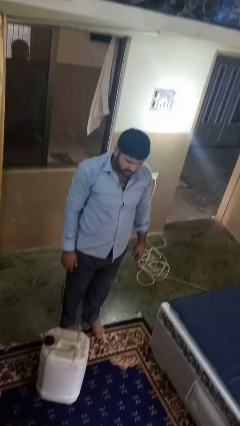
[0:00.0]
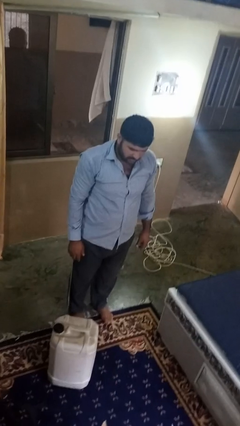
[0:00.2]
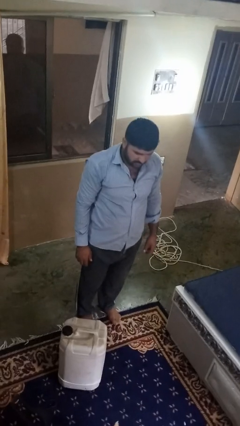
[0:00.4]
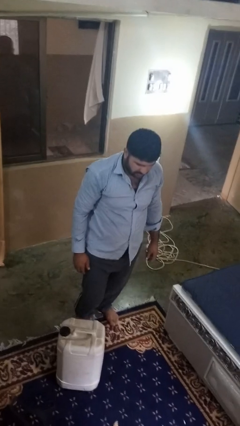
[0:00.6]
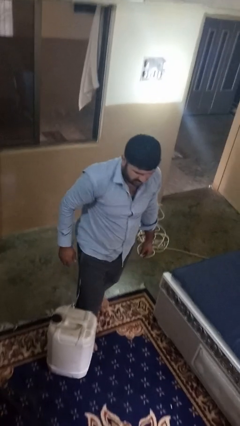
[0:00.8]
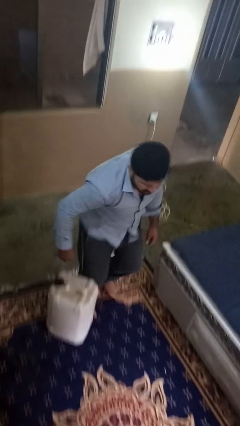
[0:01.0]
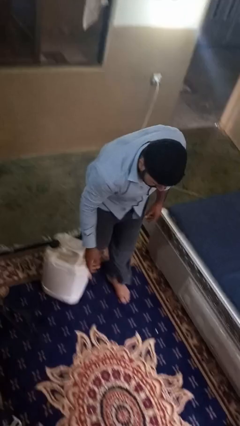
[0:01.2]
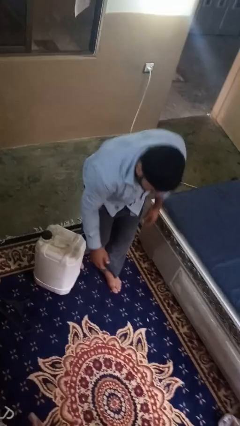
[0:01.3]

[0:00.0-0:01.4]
person trips on object on floor

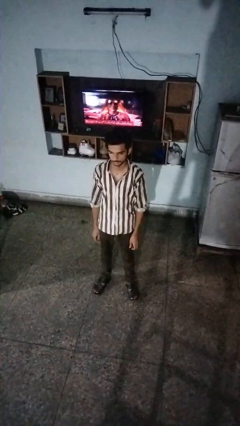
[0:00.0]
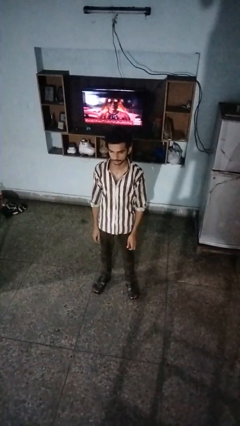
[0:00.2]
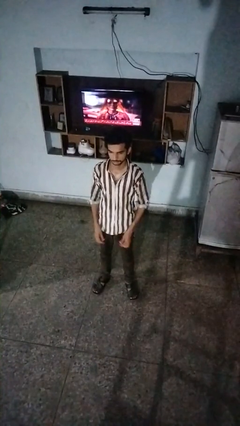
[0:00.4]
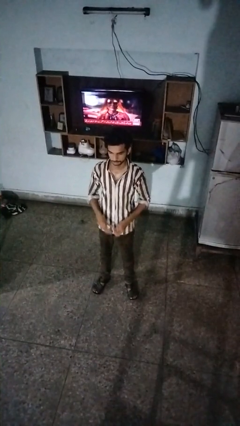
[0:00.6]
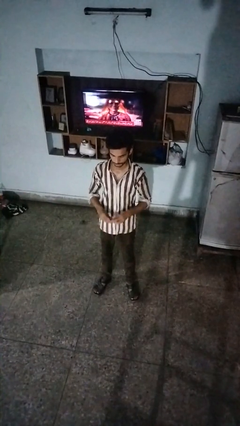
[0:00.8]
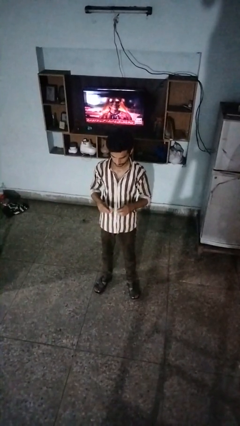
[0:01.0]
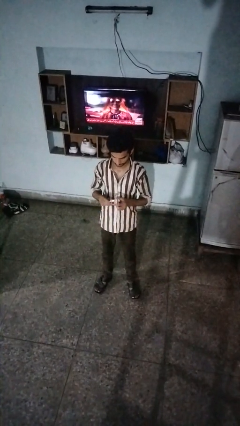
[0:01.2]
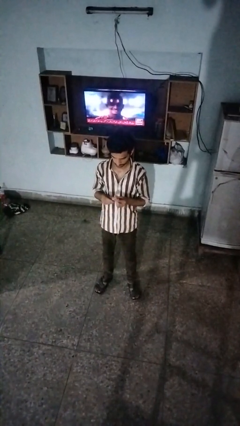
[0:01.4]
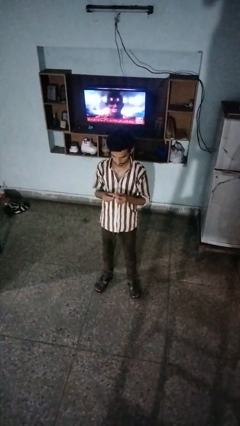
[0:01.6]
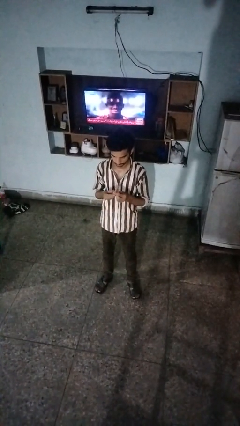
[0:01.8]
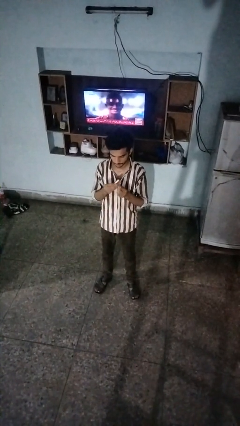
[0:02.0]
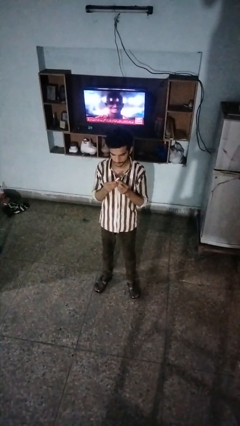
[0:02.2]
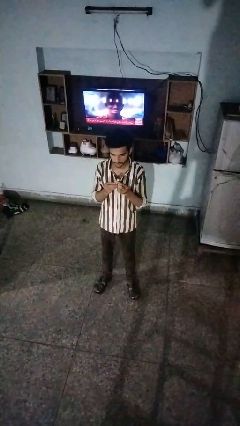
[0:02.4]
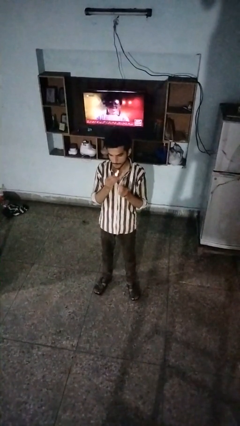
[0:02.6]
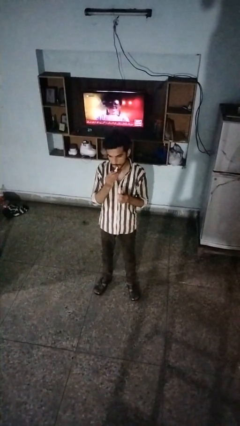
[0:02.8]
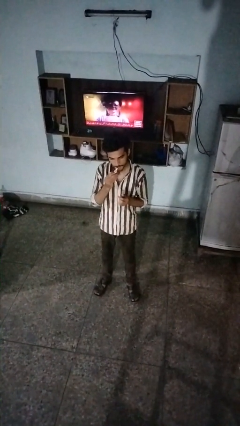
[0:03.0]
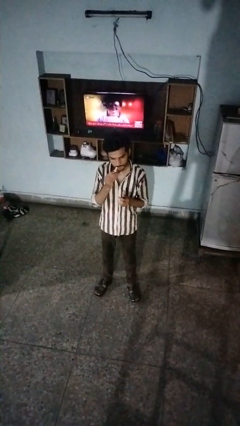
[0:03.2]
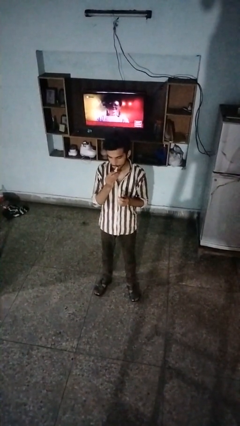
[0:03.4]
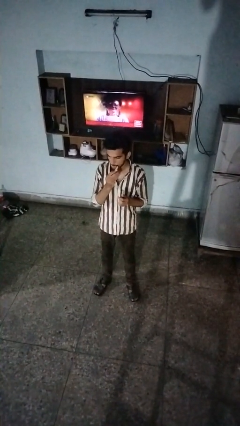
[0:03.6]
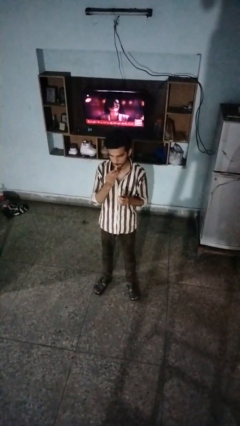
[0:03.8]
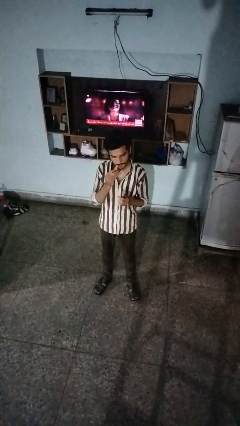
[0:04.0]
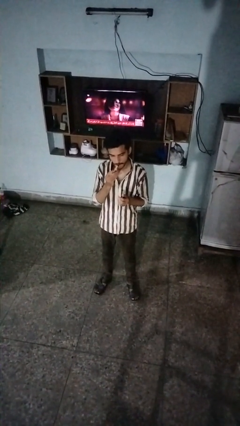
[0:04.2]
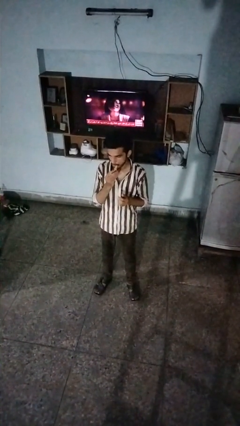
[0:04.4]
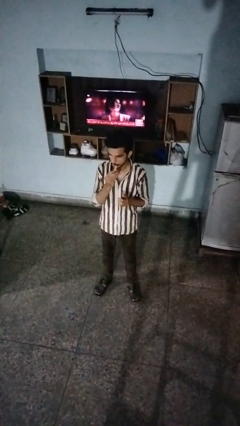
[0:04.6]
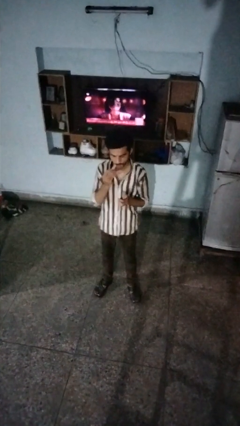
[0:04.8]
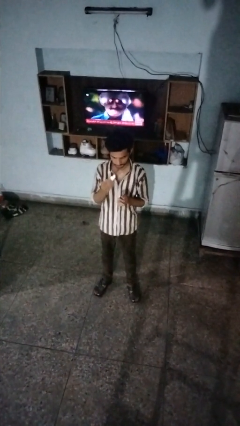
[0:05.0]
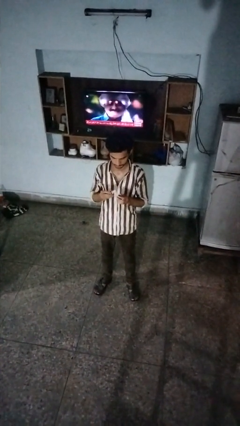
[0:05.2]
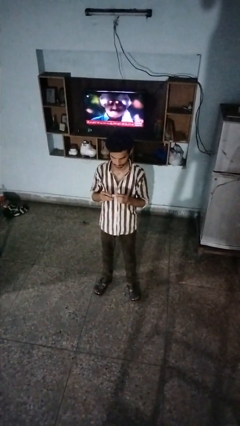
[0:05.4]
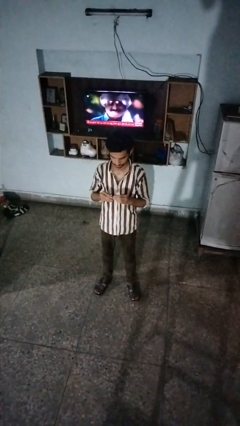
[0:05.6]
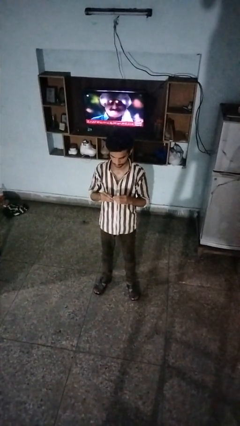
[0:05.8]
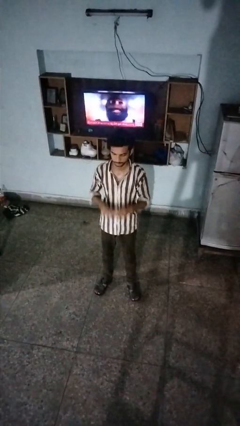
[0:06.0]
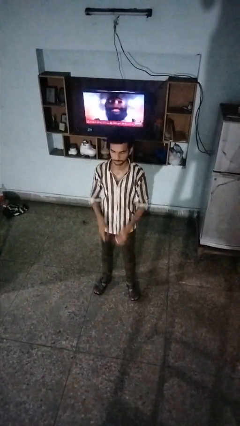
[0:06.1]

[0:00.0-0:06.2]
person applies lip makeup

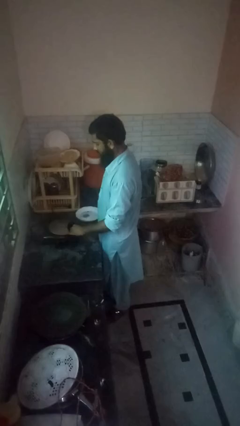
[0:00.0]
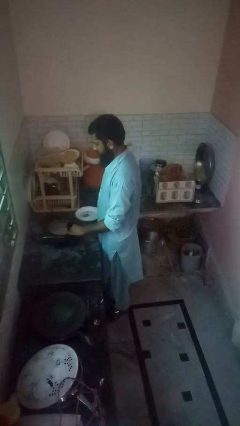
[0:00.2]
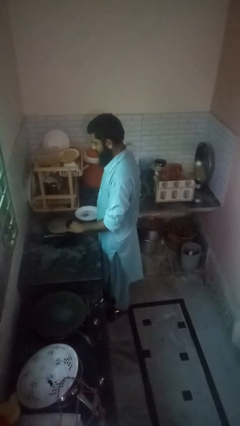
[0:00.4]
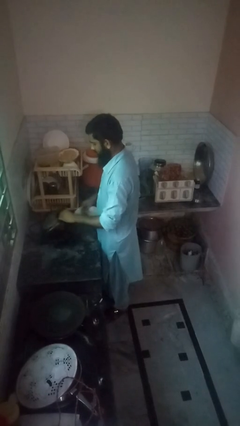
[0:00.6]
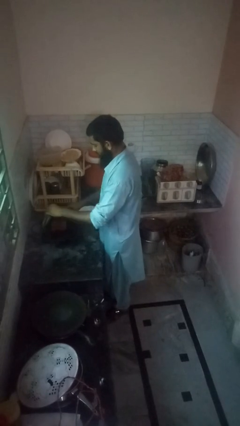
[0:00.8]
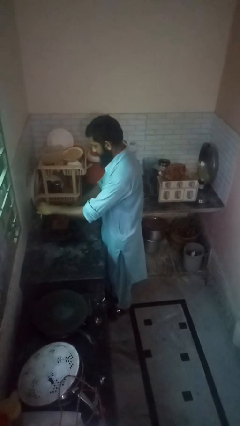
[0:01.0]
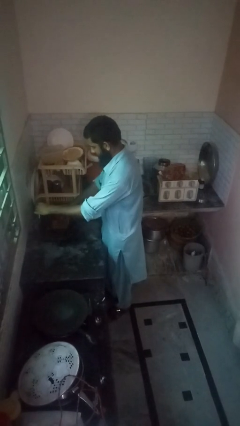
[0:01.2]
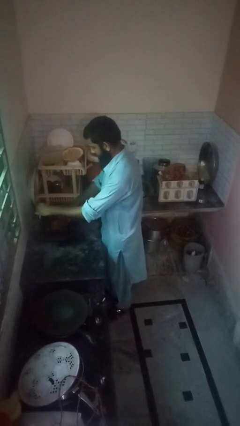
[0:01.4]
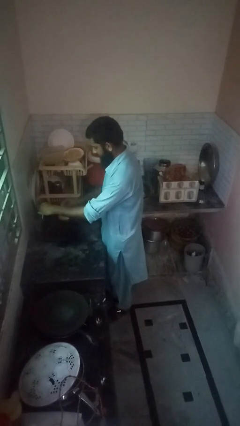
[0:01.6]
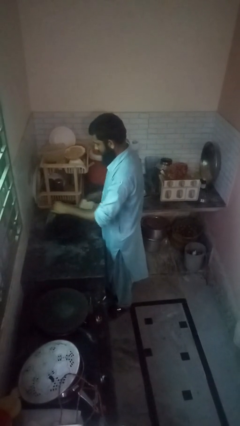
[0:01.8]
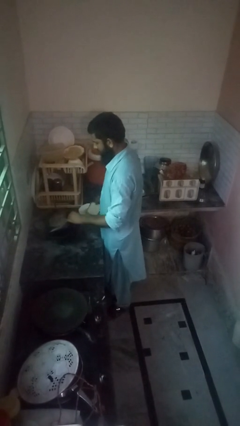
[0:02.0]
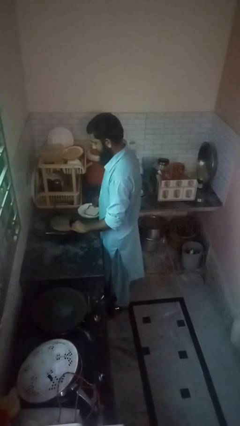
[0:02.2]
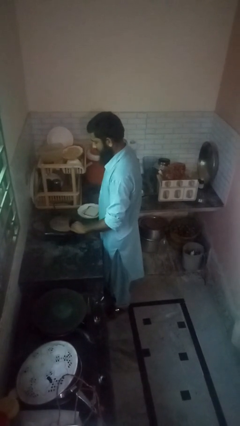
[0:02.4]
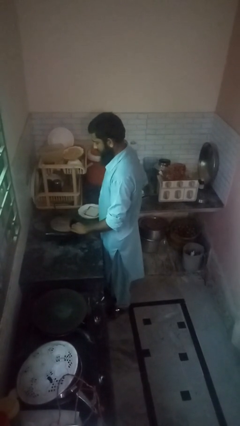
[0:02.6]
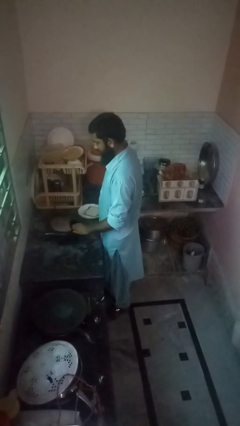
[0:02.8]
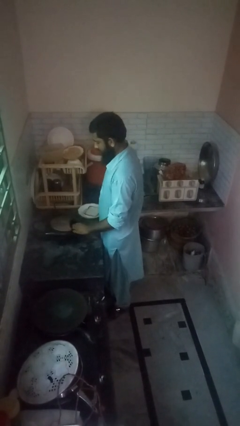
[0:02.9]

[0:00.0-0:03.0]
person takes object from toaster

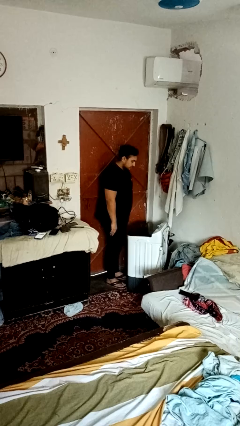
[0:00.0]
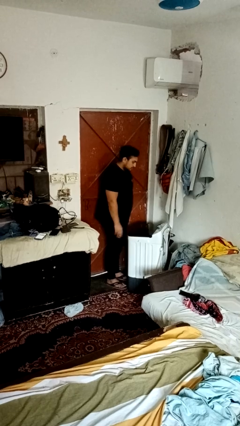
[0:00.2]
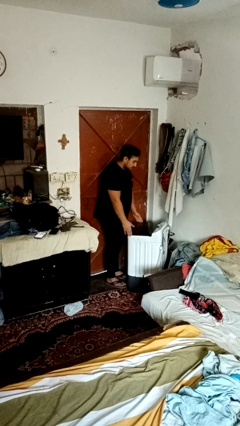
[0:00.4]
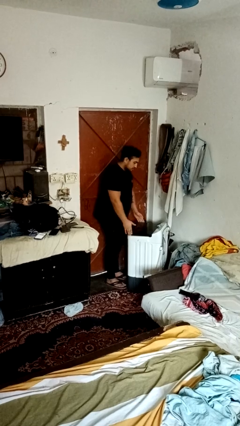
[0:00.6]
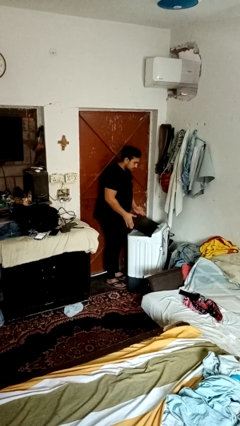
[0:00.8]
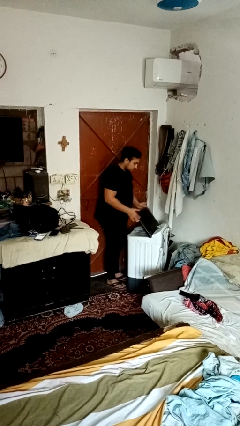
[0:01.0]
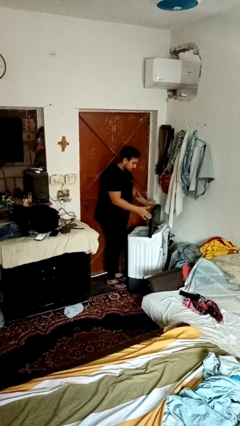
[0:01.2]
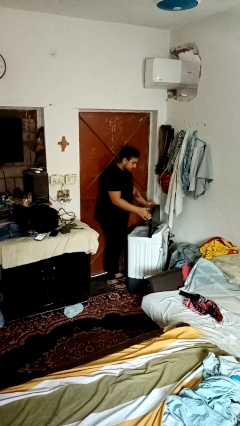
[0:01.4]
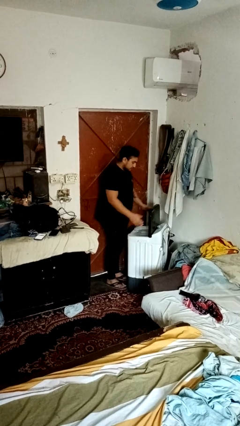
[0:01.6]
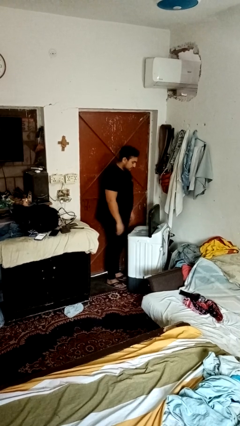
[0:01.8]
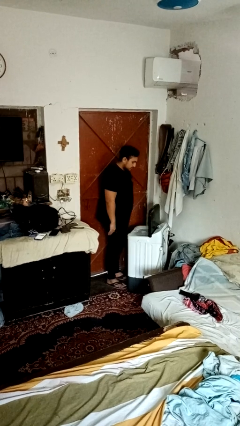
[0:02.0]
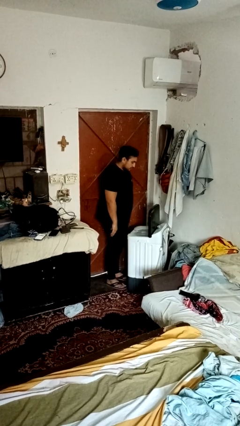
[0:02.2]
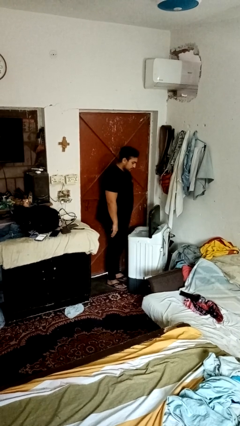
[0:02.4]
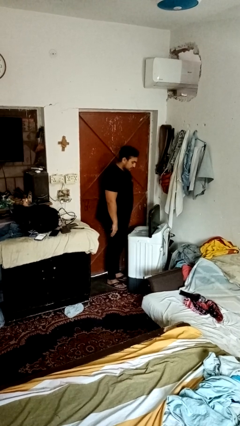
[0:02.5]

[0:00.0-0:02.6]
person opens clothes washer

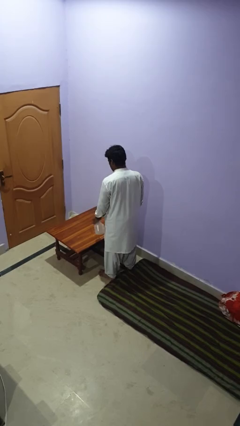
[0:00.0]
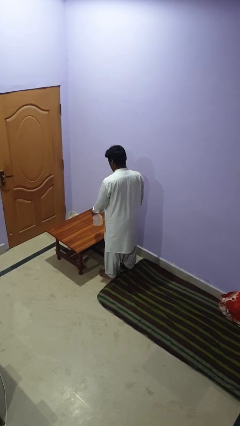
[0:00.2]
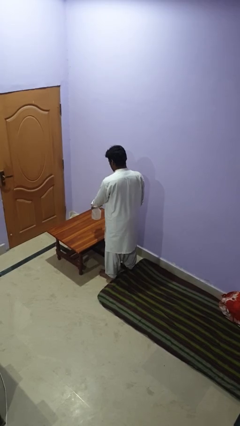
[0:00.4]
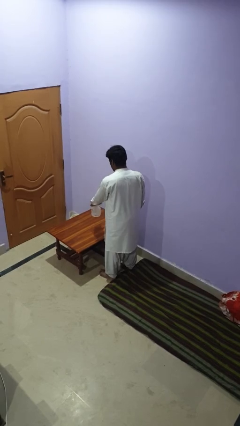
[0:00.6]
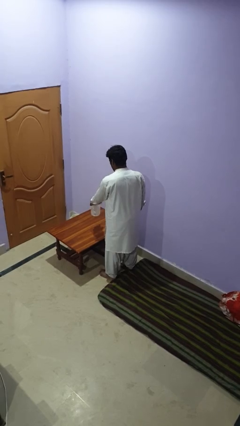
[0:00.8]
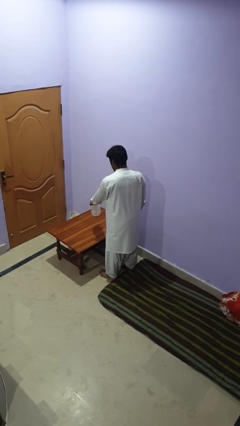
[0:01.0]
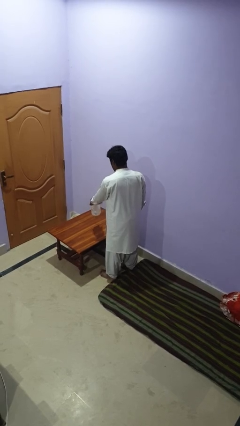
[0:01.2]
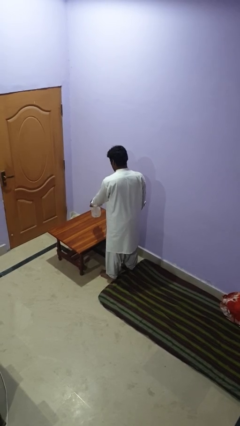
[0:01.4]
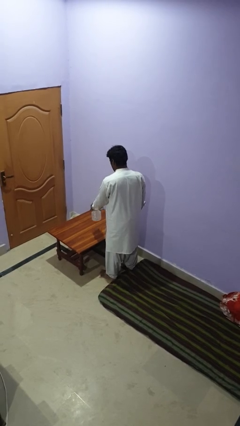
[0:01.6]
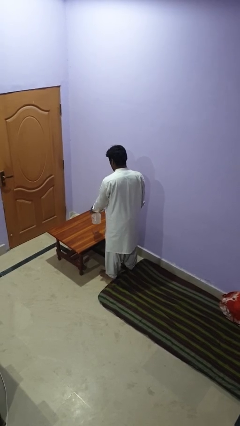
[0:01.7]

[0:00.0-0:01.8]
person sprays from bottle

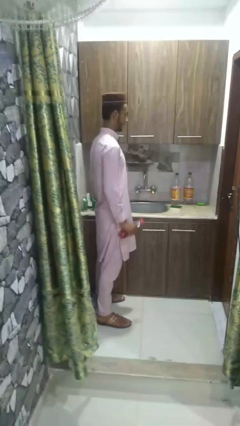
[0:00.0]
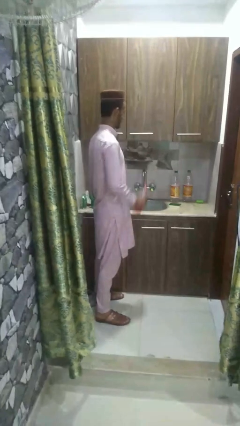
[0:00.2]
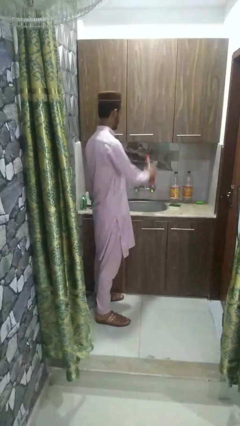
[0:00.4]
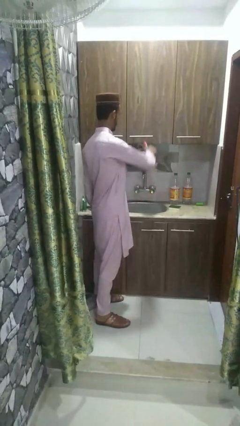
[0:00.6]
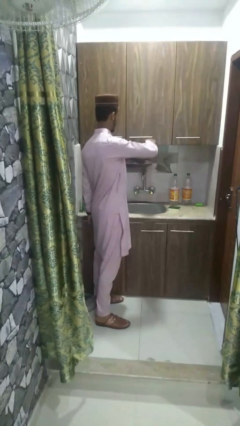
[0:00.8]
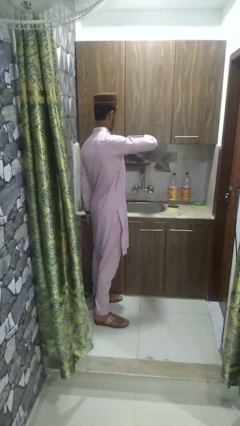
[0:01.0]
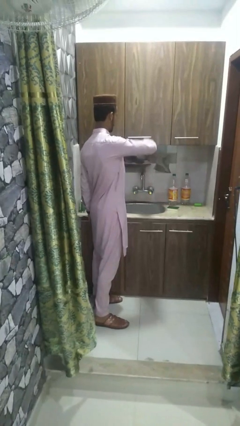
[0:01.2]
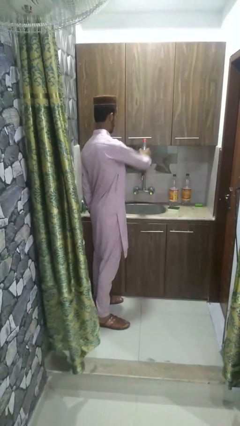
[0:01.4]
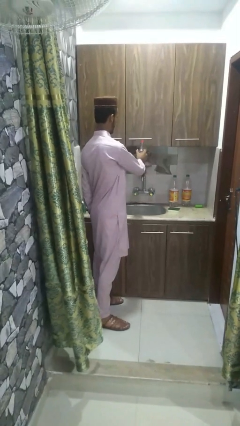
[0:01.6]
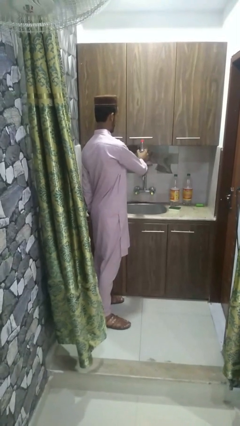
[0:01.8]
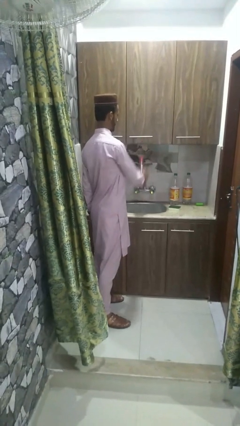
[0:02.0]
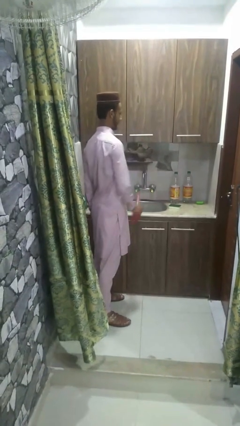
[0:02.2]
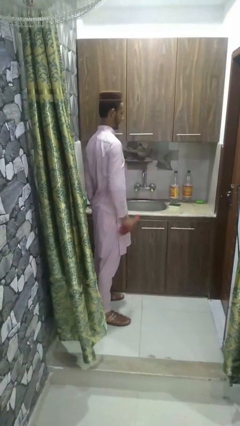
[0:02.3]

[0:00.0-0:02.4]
person opens can with can opener
